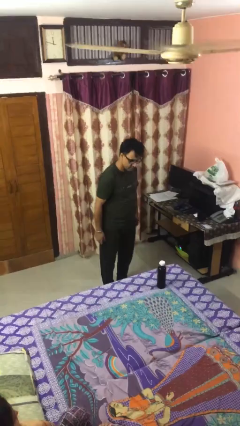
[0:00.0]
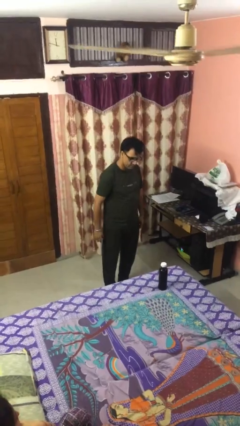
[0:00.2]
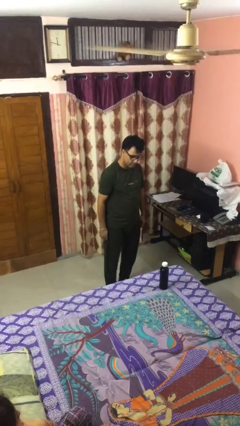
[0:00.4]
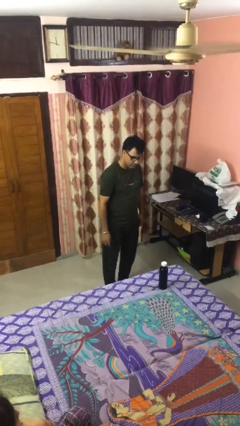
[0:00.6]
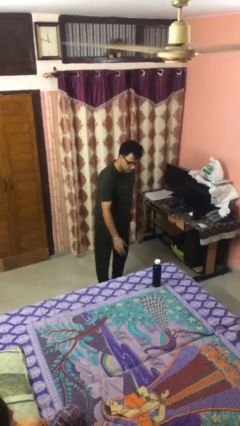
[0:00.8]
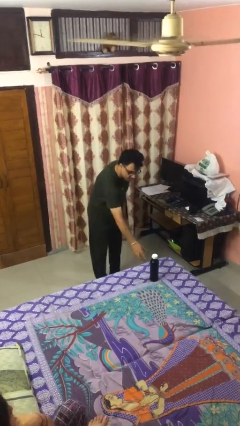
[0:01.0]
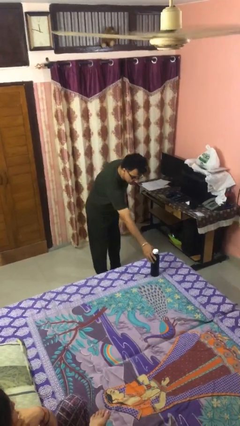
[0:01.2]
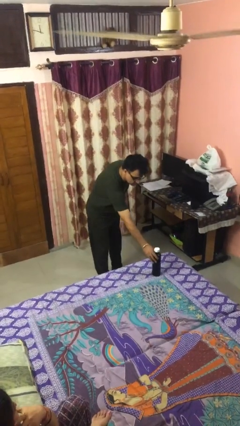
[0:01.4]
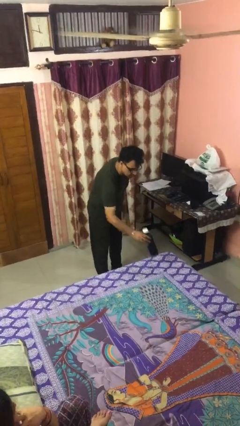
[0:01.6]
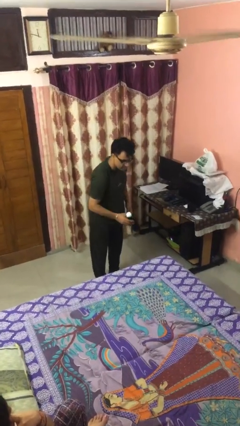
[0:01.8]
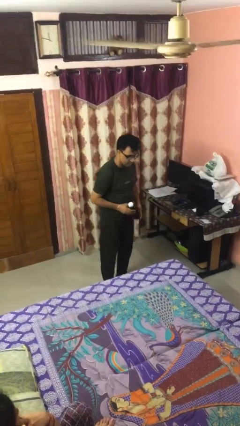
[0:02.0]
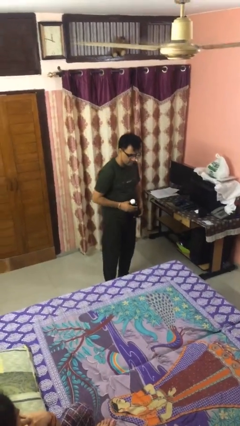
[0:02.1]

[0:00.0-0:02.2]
person picks up object from bed

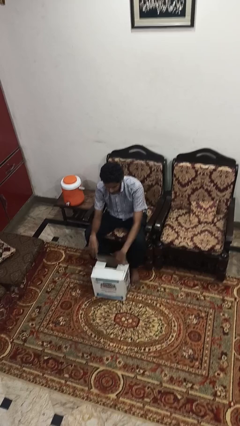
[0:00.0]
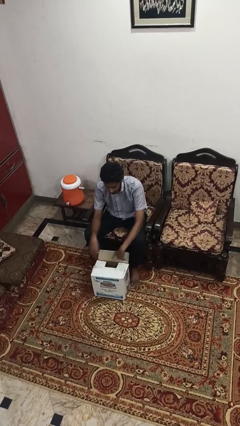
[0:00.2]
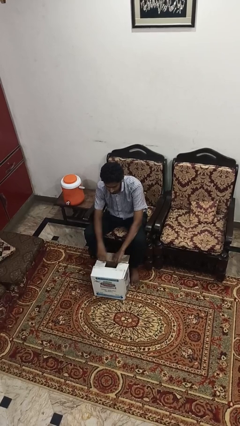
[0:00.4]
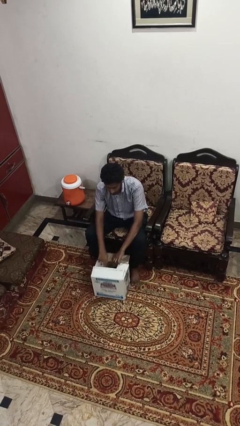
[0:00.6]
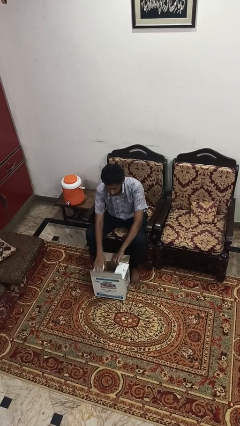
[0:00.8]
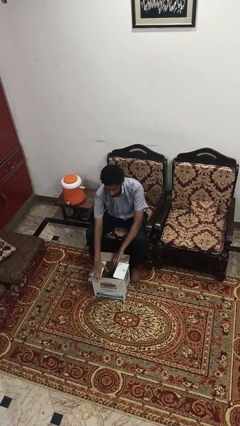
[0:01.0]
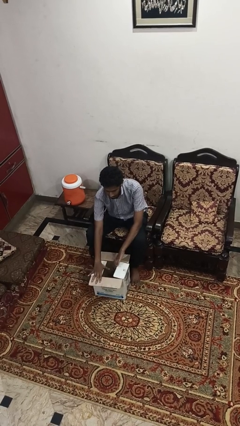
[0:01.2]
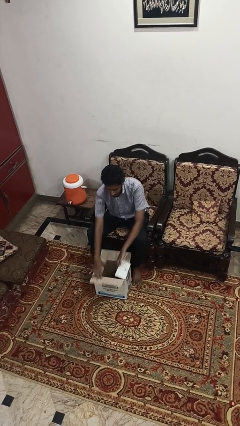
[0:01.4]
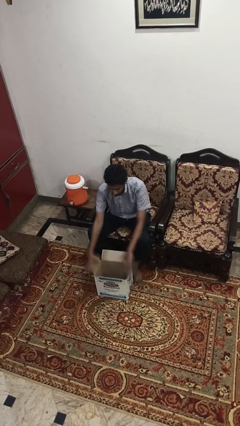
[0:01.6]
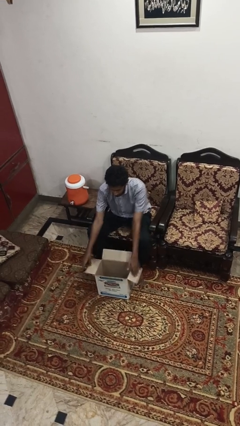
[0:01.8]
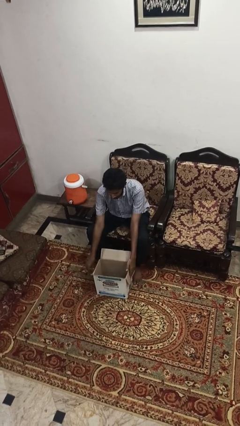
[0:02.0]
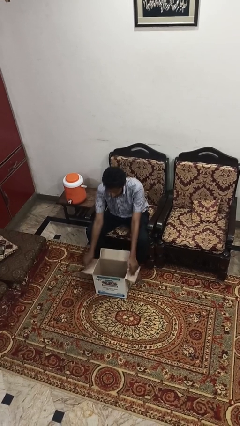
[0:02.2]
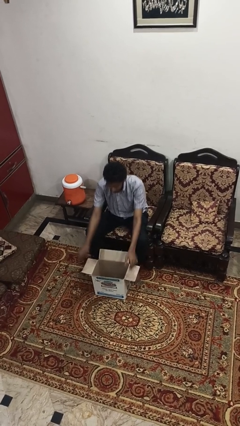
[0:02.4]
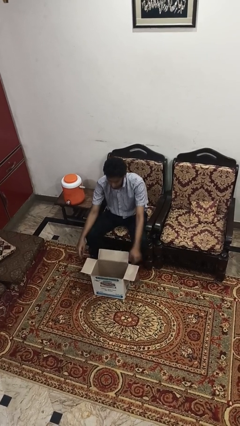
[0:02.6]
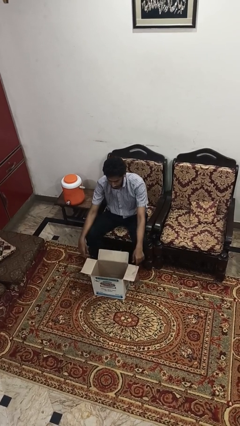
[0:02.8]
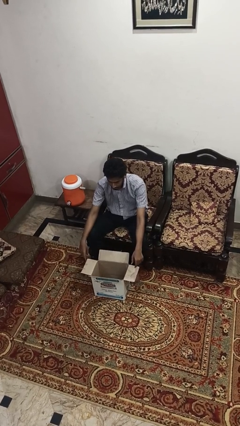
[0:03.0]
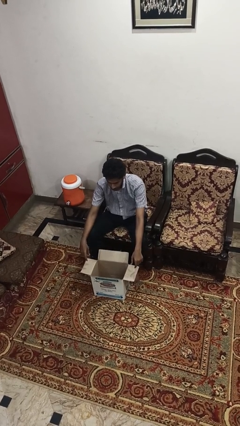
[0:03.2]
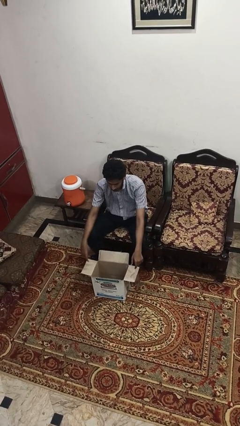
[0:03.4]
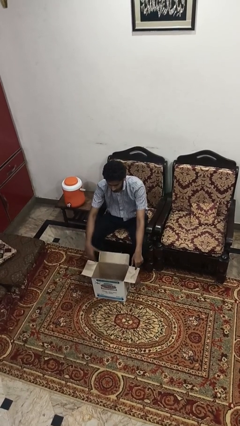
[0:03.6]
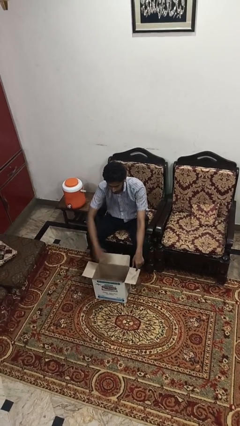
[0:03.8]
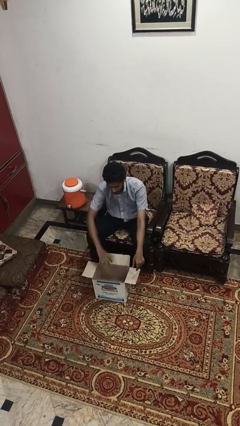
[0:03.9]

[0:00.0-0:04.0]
person opens box

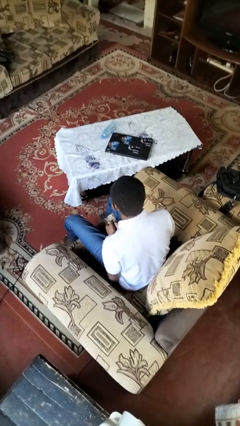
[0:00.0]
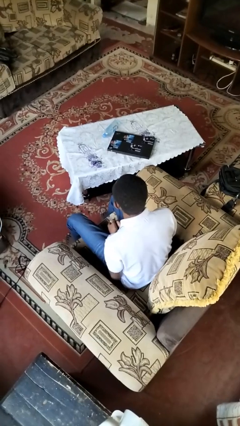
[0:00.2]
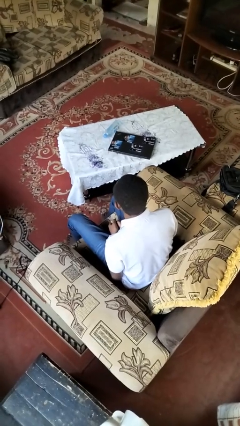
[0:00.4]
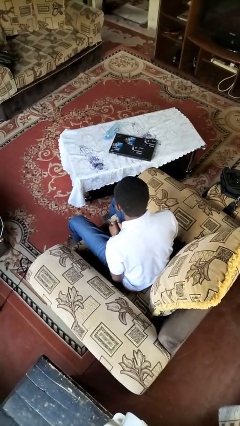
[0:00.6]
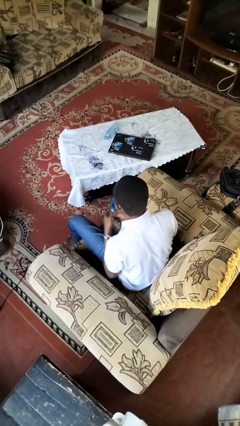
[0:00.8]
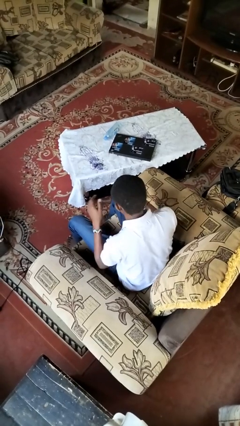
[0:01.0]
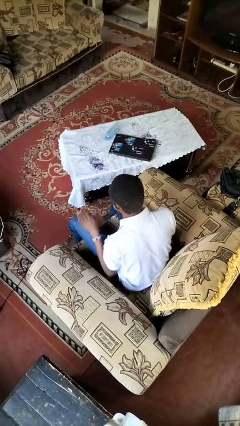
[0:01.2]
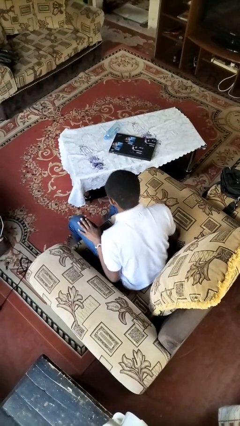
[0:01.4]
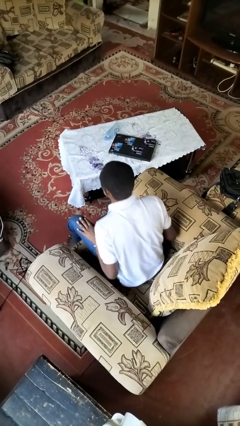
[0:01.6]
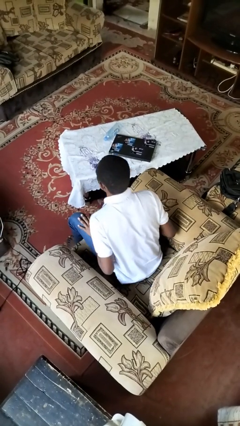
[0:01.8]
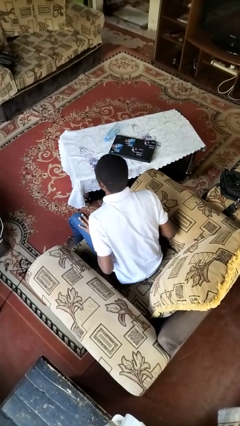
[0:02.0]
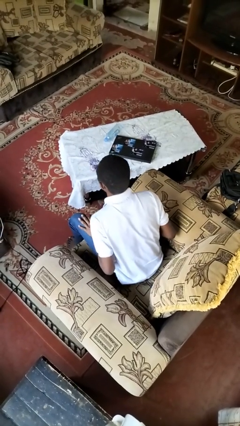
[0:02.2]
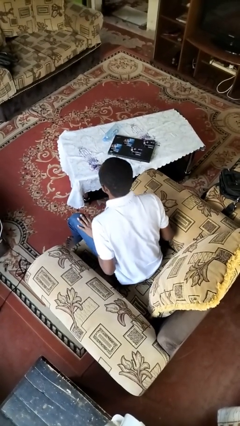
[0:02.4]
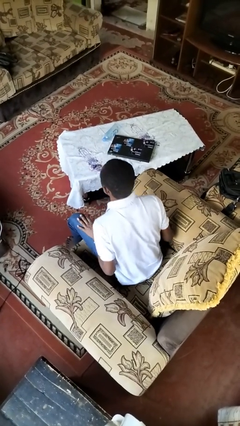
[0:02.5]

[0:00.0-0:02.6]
person slaps hands on thighs

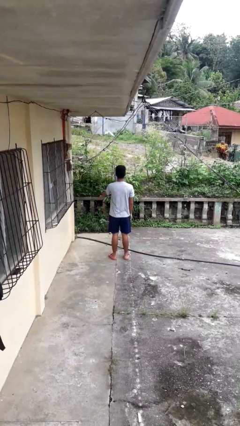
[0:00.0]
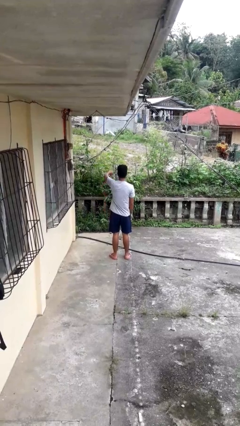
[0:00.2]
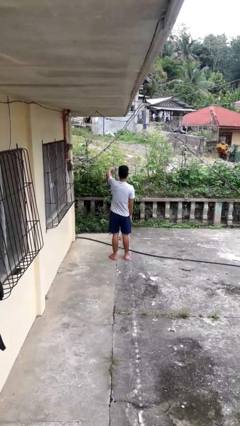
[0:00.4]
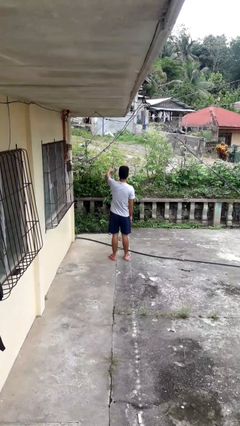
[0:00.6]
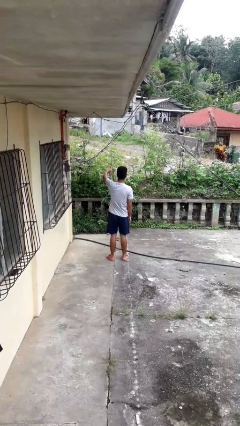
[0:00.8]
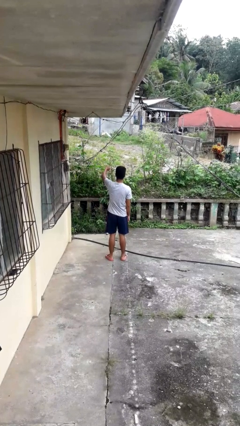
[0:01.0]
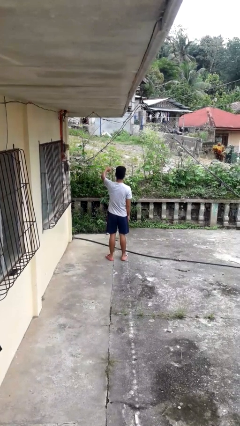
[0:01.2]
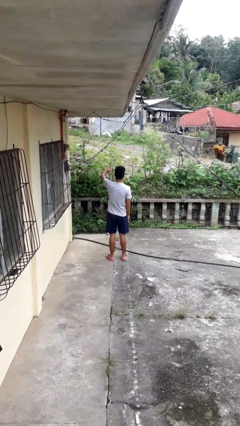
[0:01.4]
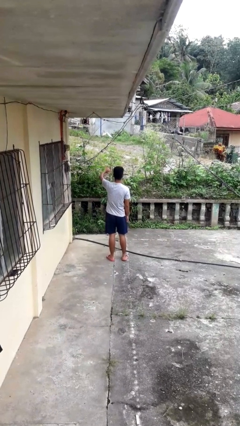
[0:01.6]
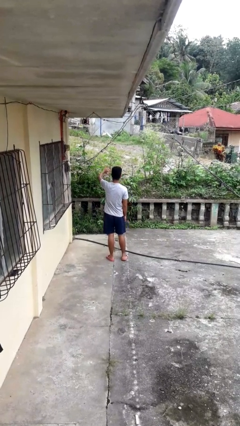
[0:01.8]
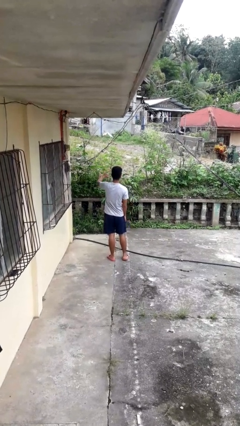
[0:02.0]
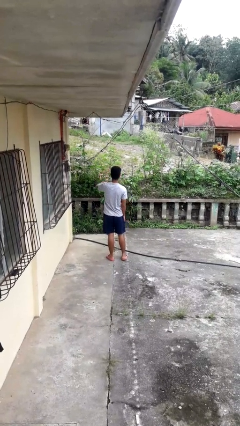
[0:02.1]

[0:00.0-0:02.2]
person gestures thumbs down

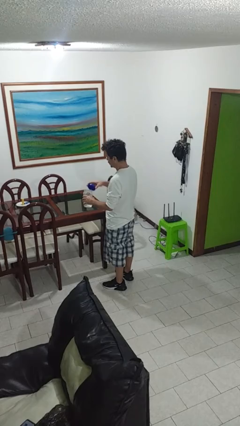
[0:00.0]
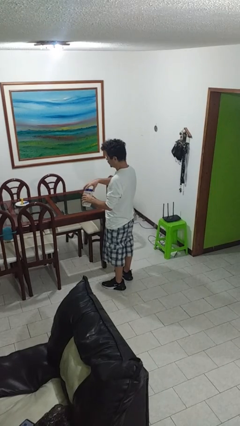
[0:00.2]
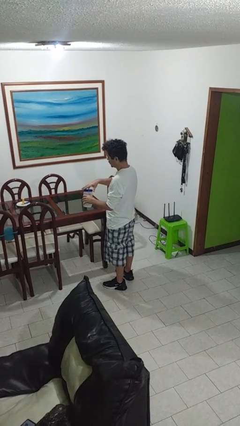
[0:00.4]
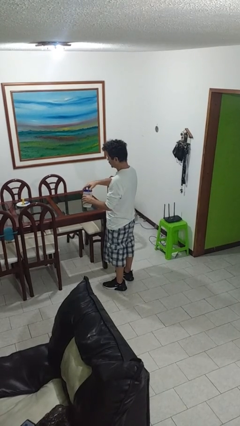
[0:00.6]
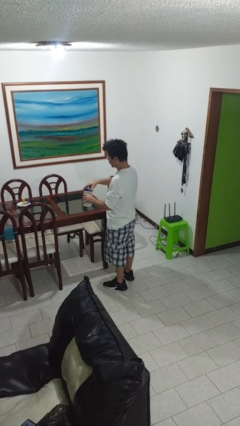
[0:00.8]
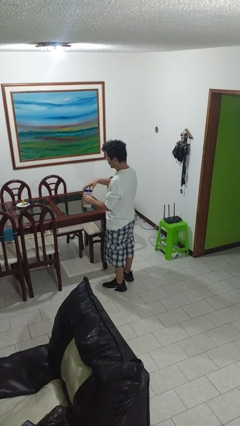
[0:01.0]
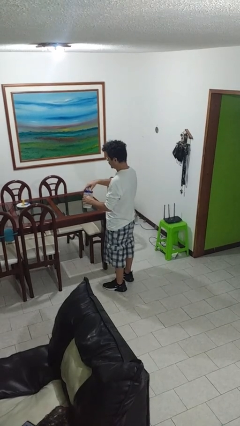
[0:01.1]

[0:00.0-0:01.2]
person closes jar

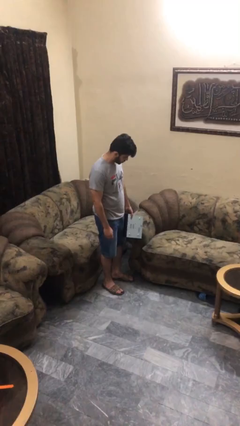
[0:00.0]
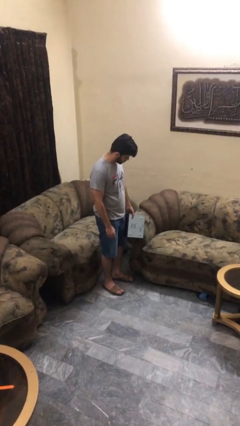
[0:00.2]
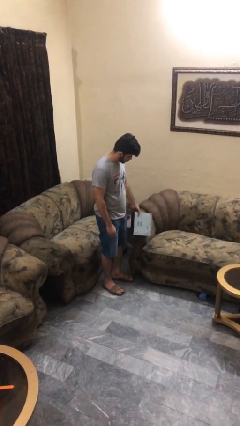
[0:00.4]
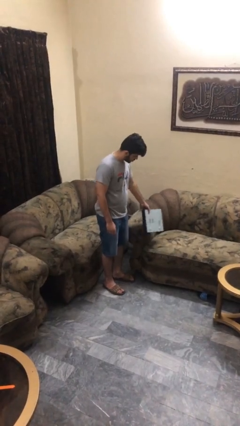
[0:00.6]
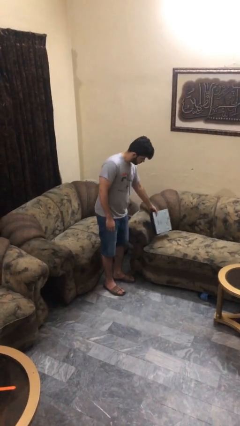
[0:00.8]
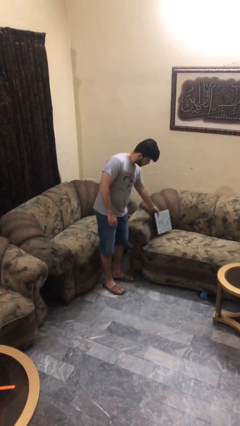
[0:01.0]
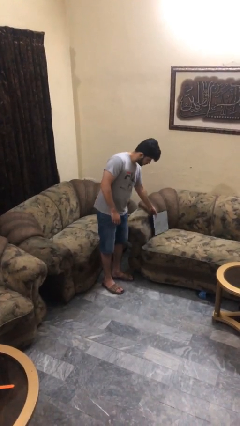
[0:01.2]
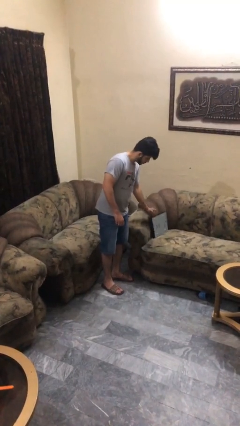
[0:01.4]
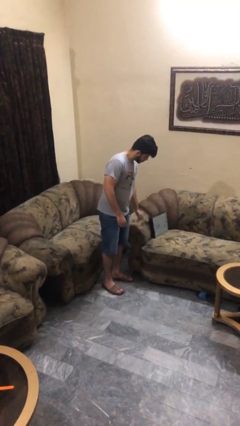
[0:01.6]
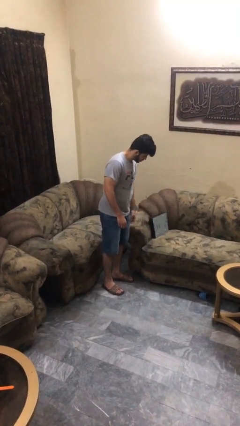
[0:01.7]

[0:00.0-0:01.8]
person puts down object on couch

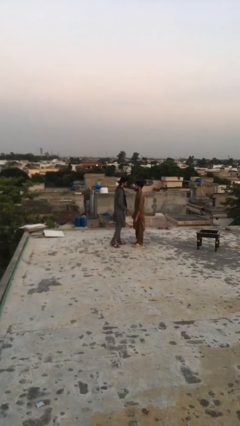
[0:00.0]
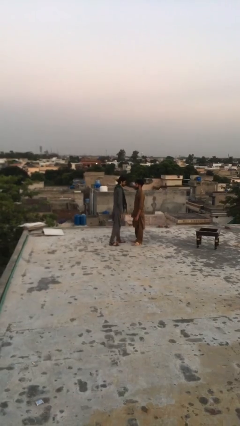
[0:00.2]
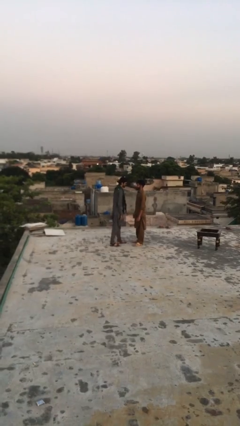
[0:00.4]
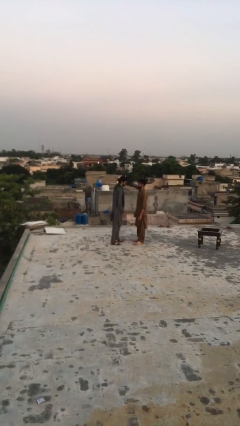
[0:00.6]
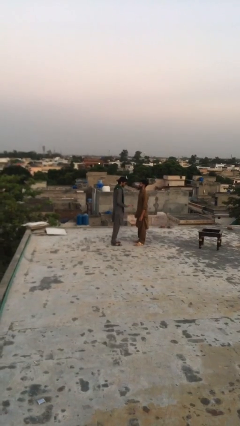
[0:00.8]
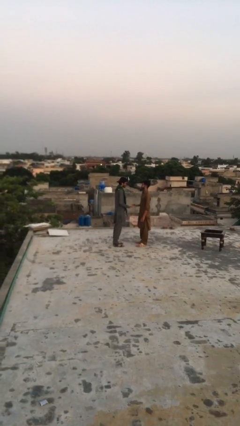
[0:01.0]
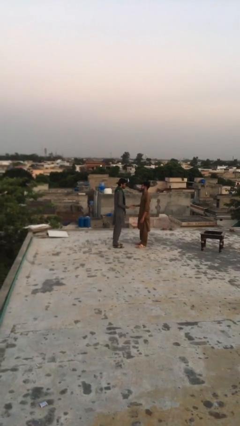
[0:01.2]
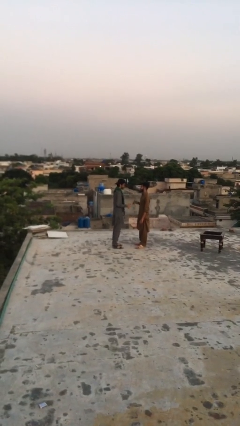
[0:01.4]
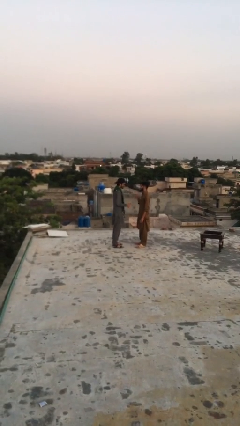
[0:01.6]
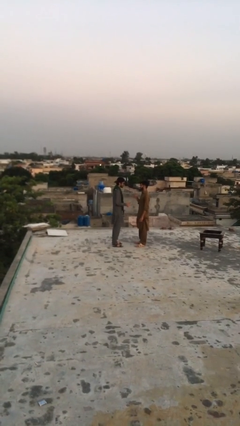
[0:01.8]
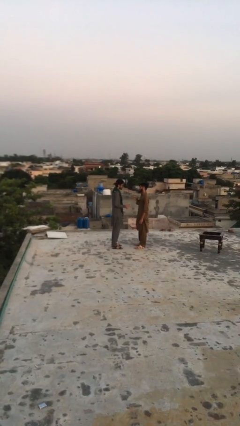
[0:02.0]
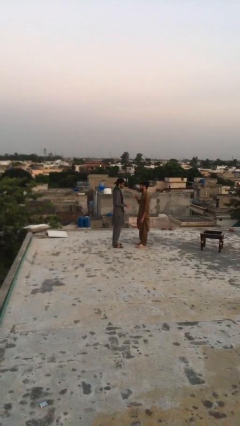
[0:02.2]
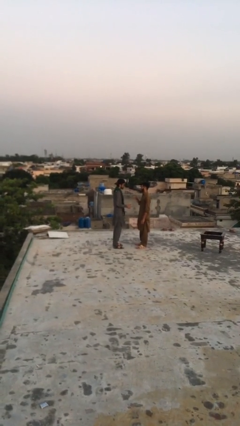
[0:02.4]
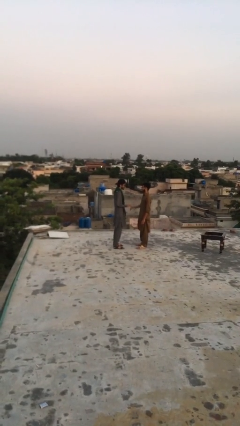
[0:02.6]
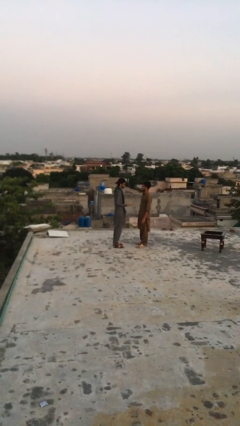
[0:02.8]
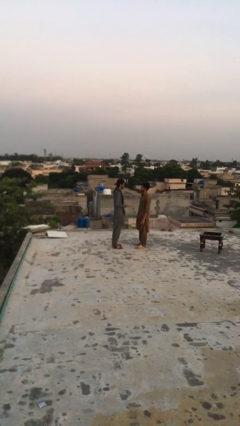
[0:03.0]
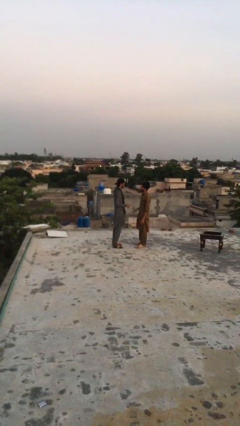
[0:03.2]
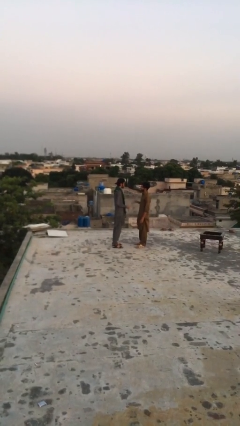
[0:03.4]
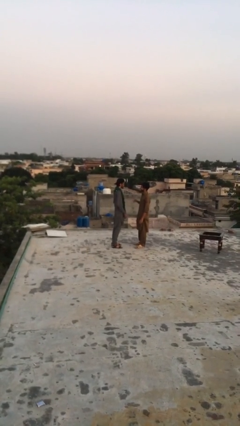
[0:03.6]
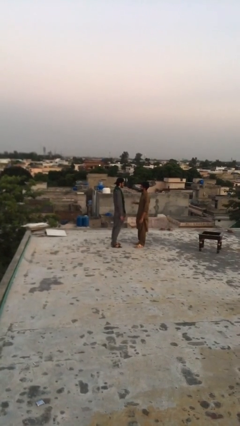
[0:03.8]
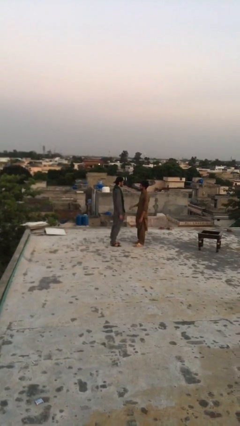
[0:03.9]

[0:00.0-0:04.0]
person talks to person
